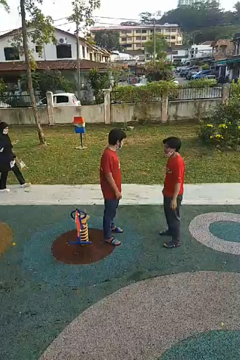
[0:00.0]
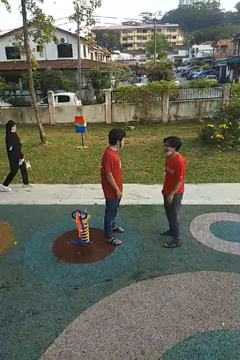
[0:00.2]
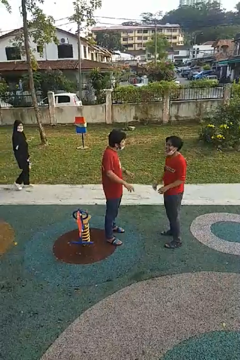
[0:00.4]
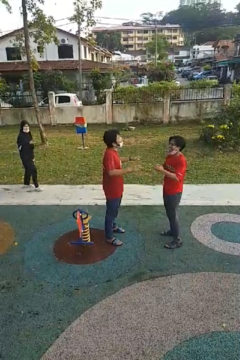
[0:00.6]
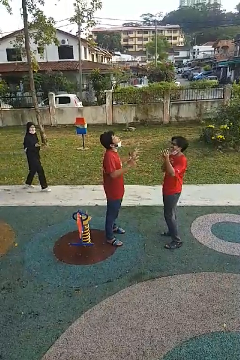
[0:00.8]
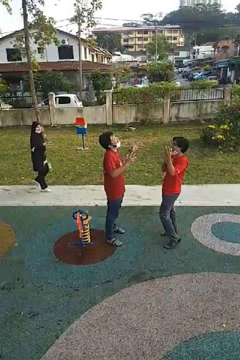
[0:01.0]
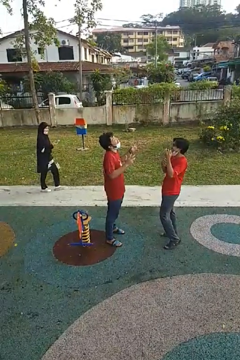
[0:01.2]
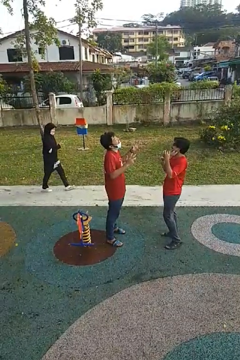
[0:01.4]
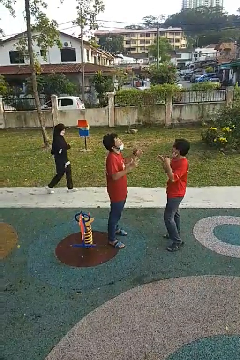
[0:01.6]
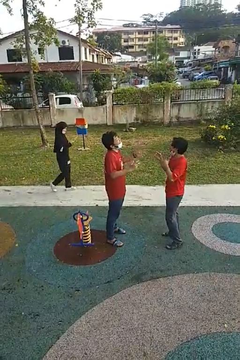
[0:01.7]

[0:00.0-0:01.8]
person laughs with person

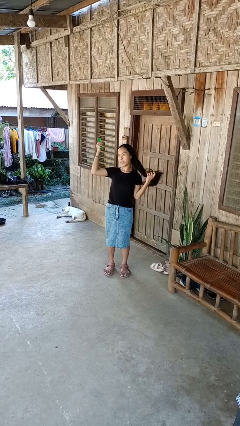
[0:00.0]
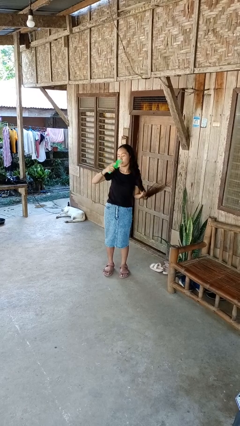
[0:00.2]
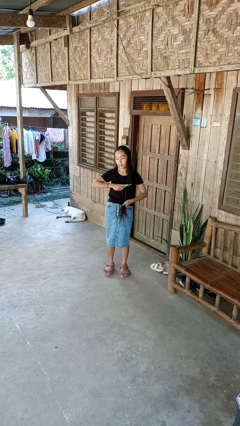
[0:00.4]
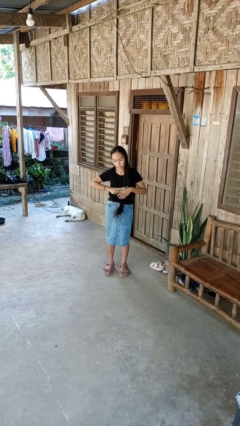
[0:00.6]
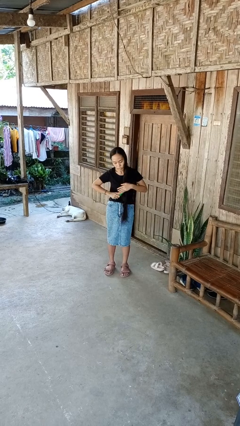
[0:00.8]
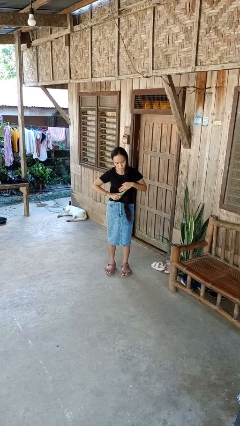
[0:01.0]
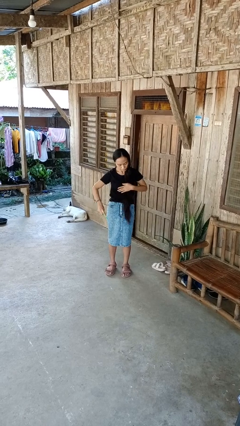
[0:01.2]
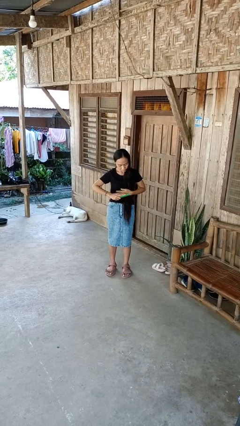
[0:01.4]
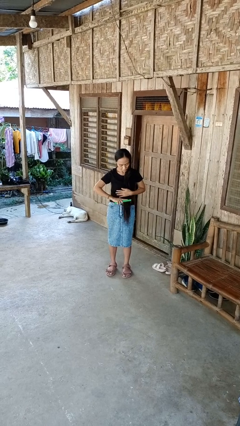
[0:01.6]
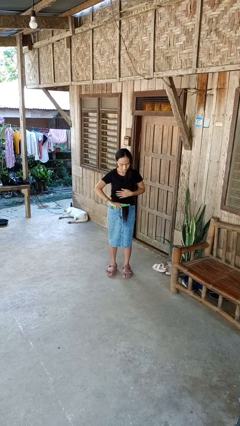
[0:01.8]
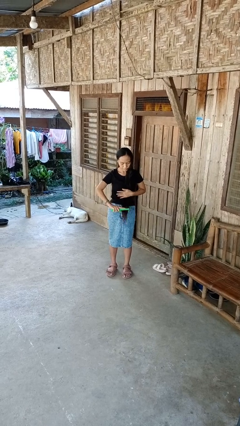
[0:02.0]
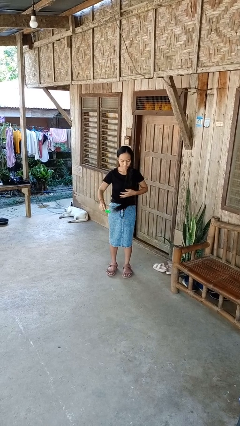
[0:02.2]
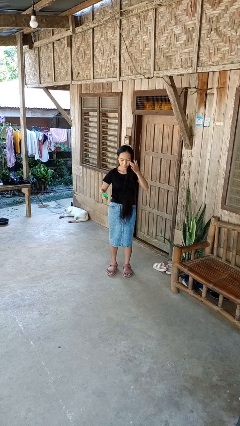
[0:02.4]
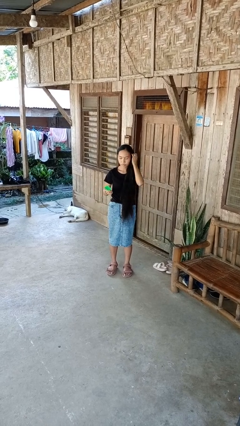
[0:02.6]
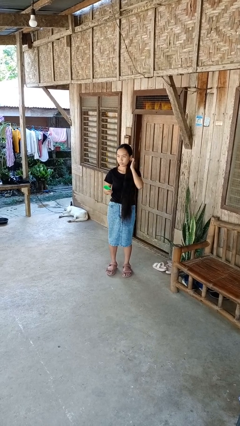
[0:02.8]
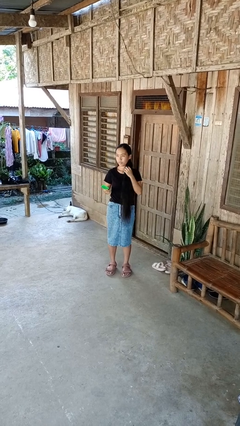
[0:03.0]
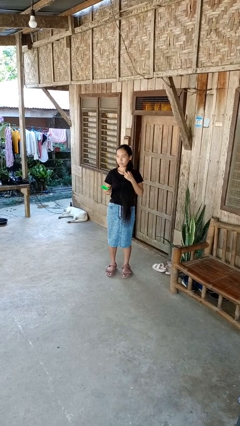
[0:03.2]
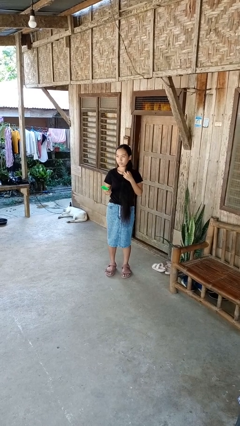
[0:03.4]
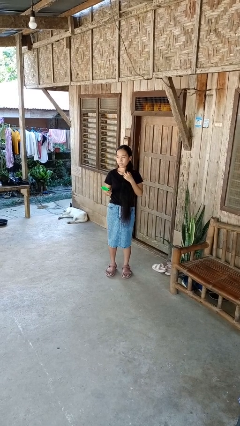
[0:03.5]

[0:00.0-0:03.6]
person brushes hair

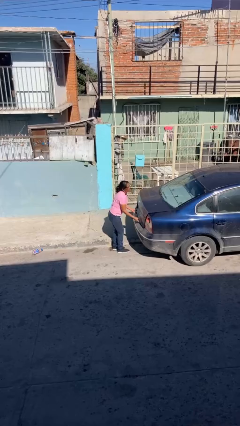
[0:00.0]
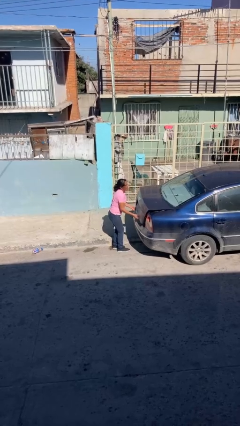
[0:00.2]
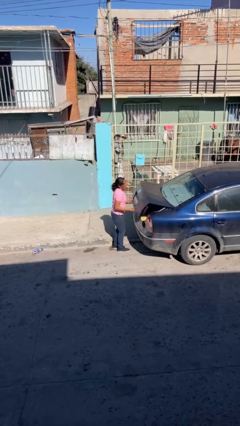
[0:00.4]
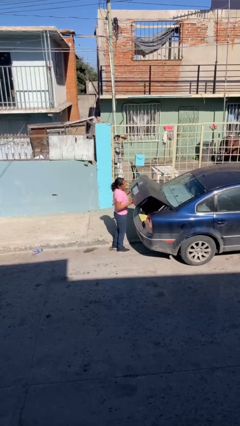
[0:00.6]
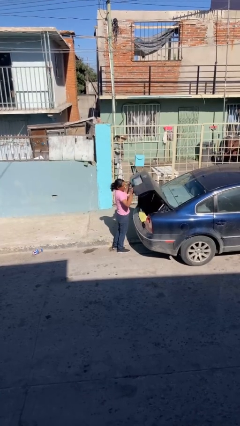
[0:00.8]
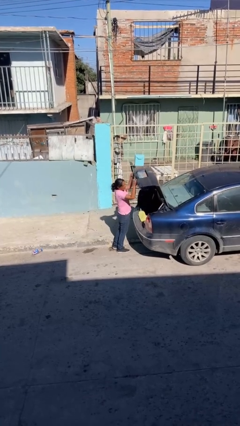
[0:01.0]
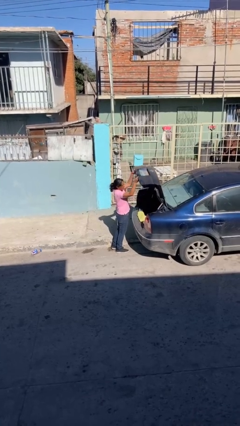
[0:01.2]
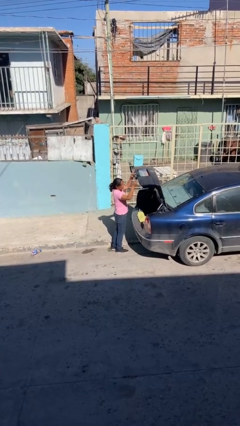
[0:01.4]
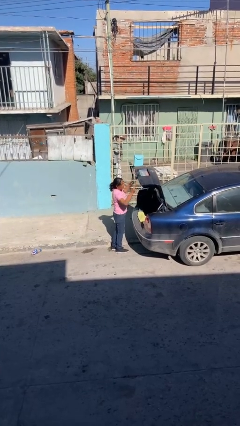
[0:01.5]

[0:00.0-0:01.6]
person opens car trunk

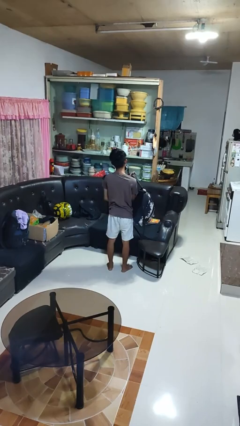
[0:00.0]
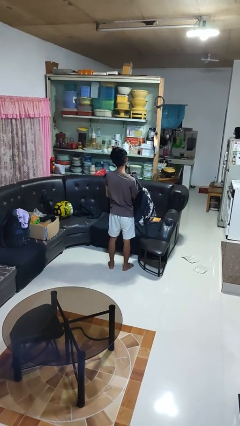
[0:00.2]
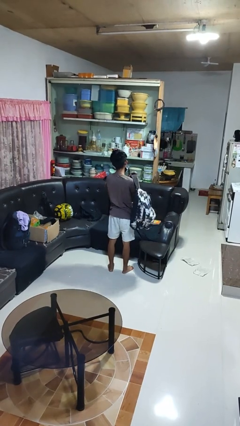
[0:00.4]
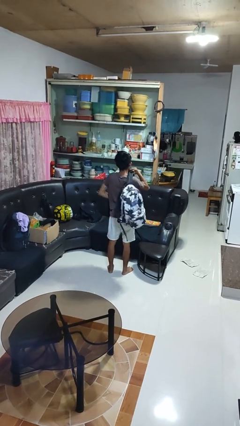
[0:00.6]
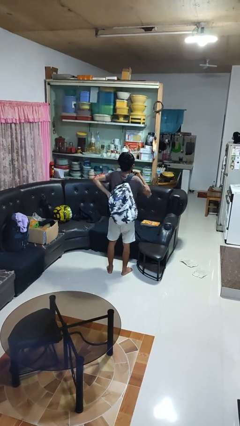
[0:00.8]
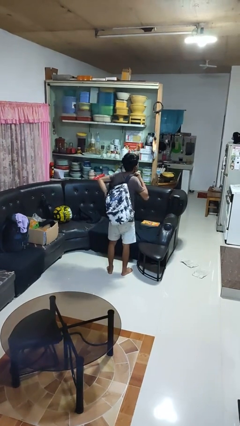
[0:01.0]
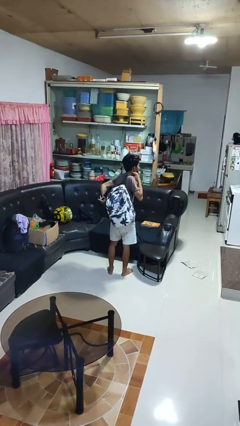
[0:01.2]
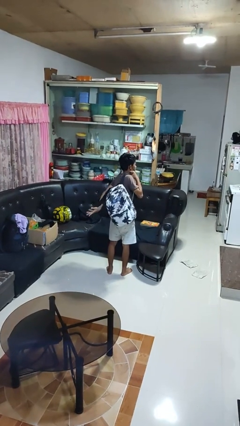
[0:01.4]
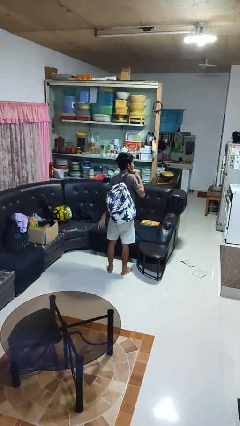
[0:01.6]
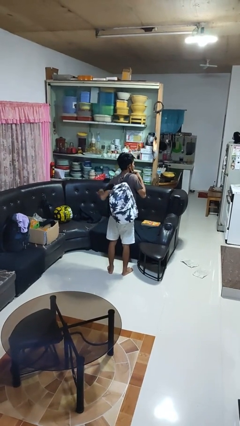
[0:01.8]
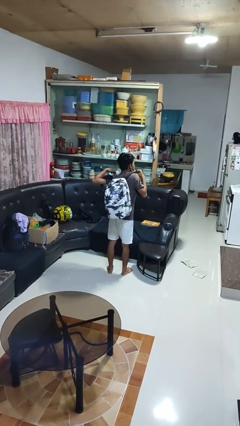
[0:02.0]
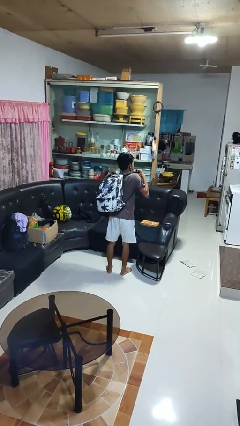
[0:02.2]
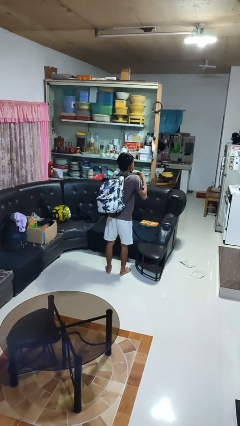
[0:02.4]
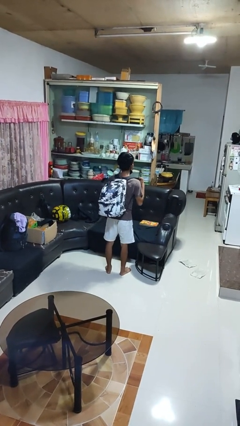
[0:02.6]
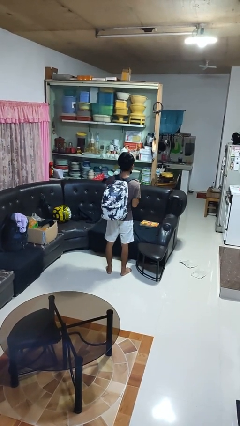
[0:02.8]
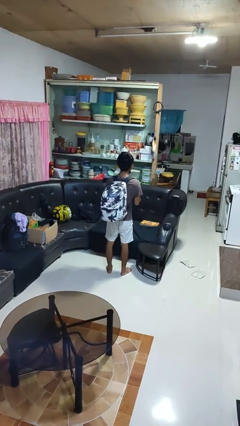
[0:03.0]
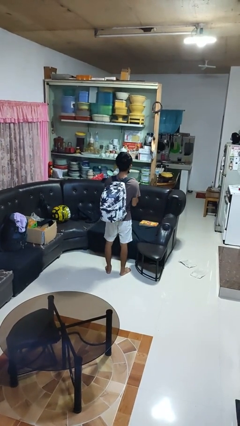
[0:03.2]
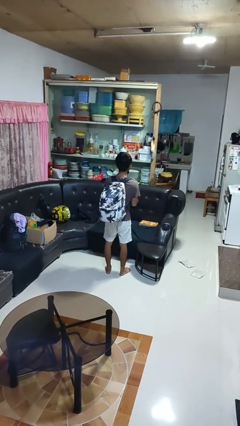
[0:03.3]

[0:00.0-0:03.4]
person puts on backpack

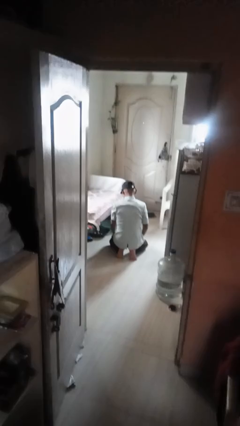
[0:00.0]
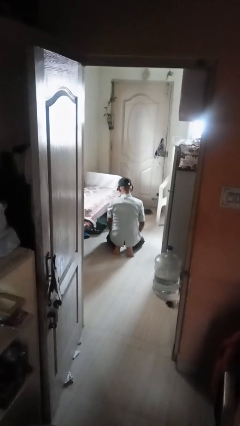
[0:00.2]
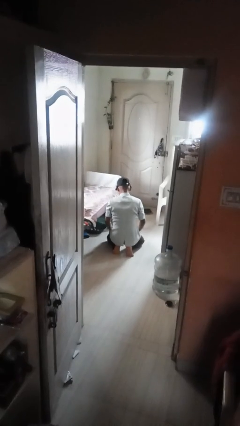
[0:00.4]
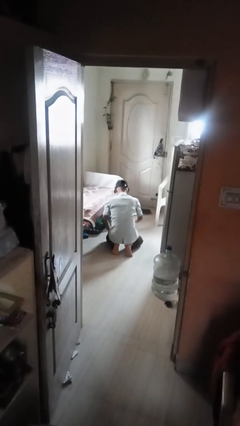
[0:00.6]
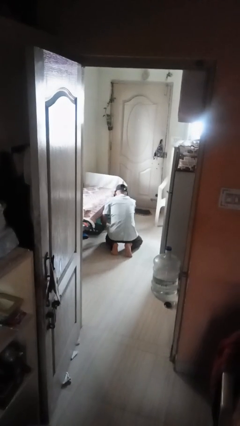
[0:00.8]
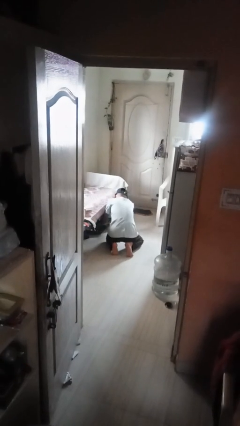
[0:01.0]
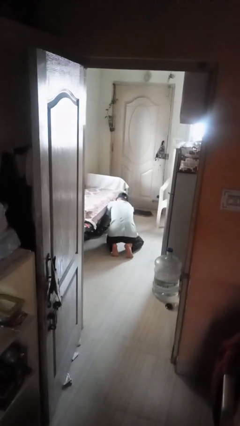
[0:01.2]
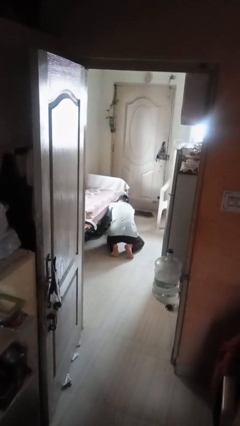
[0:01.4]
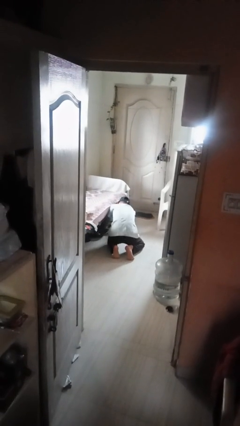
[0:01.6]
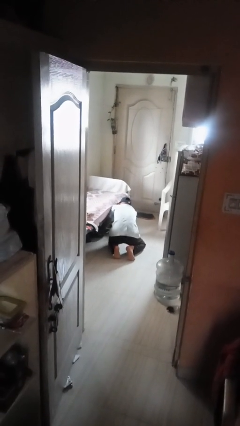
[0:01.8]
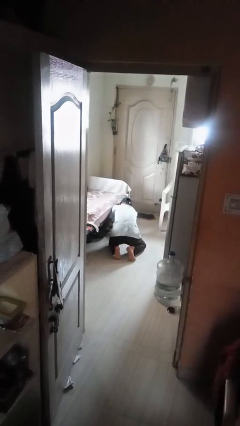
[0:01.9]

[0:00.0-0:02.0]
person searches under bed

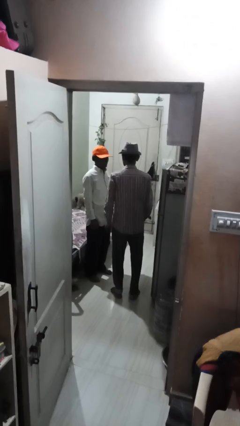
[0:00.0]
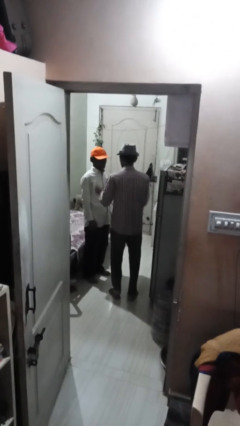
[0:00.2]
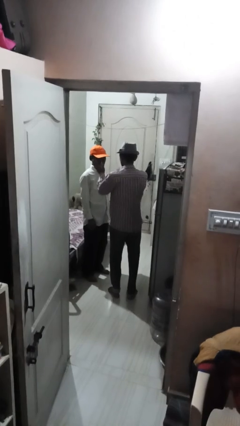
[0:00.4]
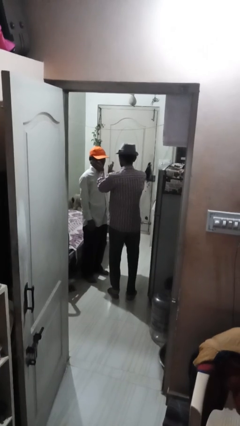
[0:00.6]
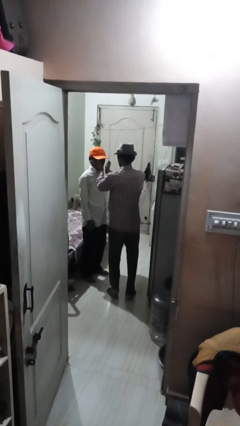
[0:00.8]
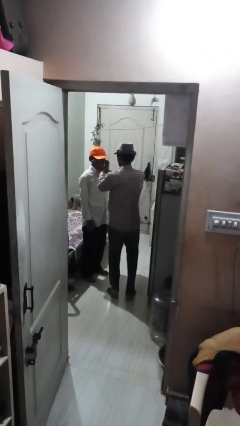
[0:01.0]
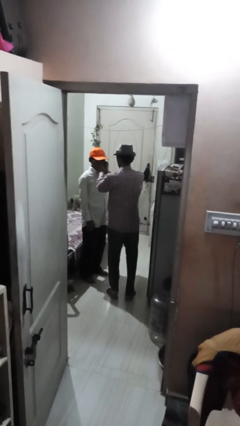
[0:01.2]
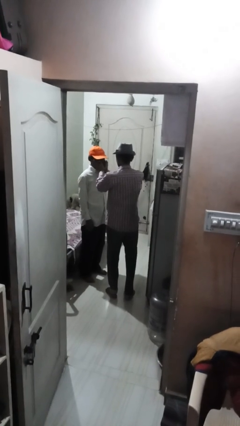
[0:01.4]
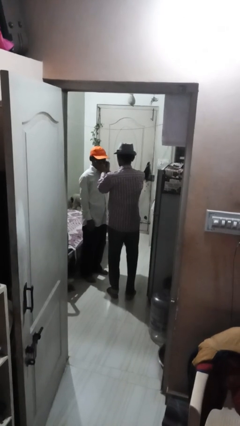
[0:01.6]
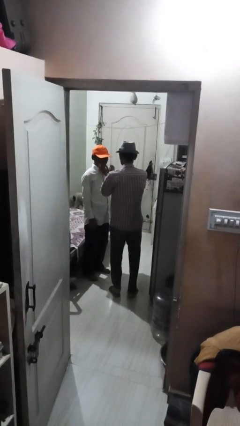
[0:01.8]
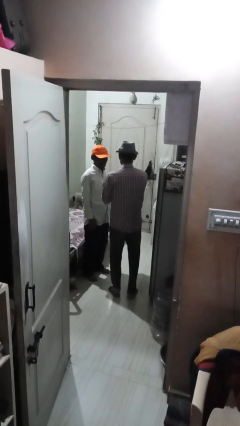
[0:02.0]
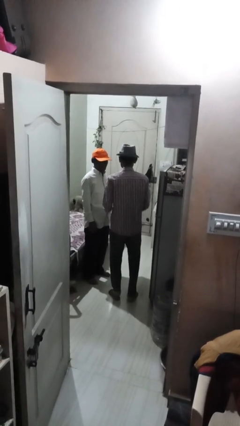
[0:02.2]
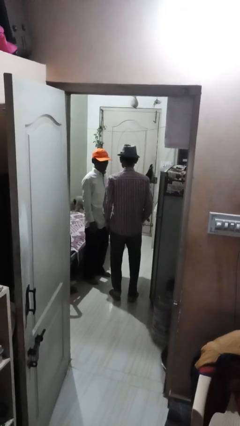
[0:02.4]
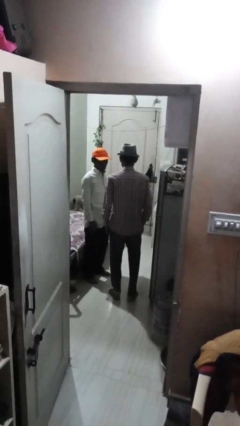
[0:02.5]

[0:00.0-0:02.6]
person touches face of person

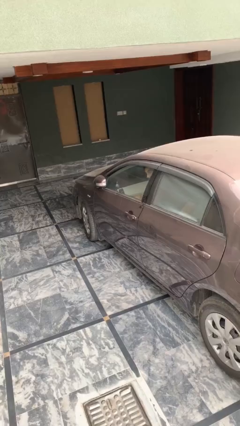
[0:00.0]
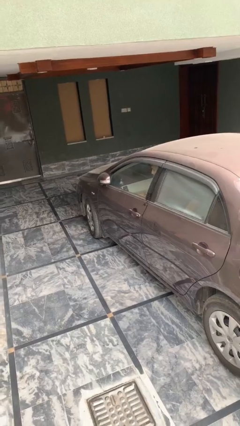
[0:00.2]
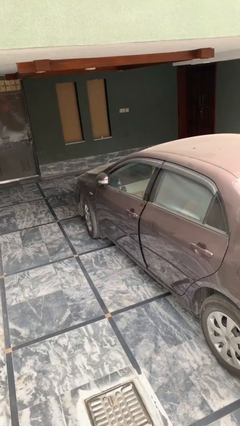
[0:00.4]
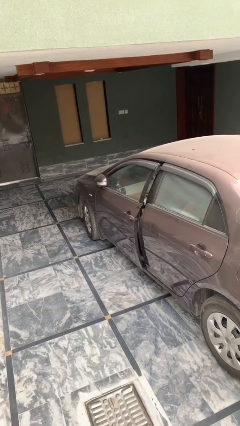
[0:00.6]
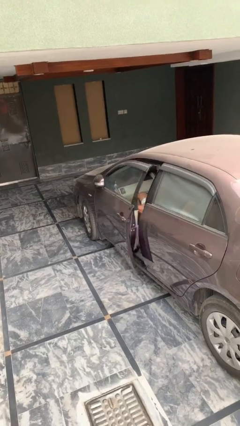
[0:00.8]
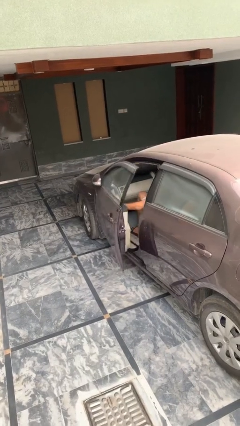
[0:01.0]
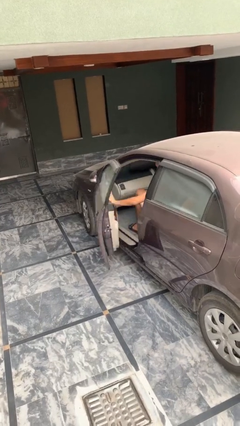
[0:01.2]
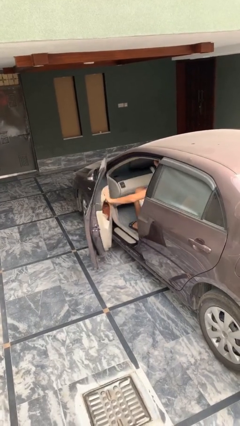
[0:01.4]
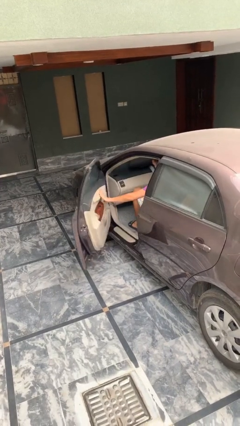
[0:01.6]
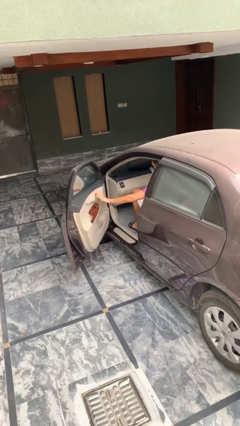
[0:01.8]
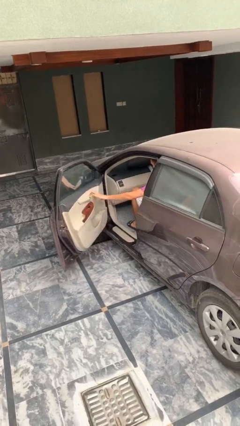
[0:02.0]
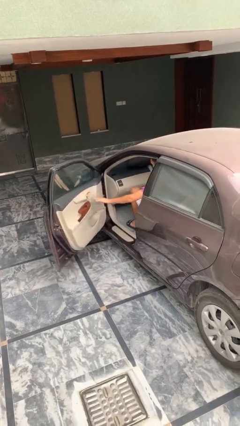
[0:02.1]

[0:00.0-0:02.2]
person opens car door
